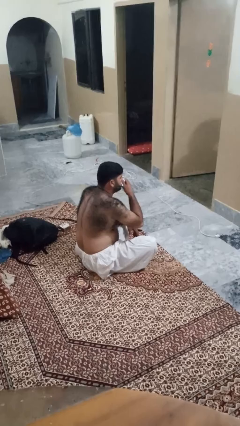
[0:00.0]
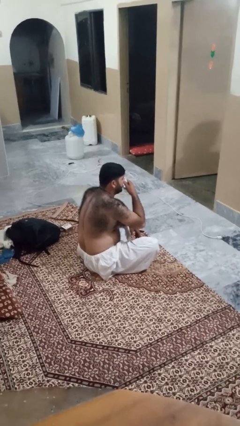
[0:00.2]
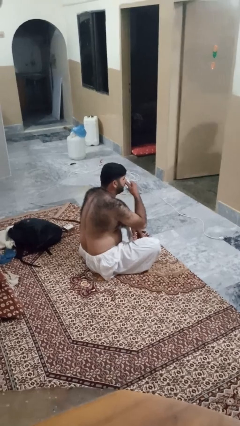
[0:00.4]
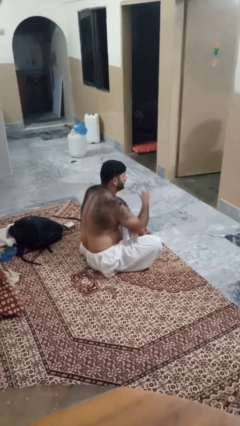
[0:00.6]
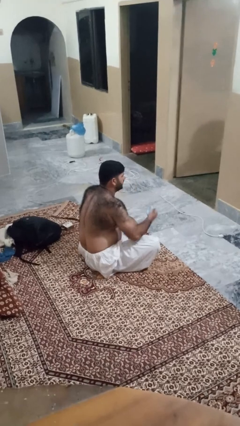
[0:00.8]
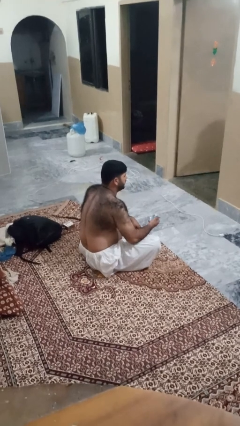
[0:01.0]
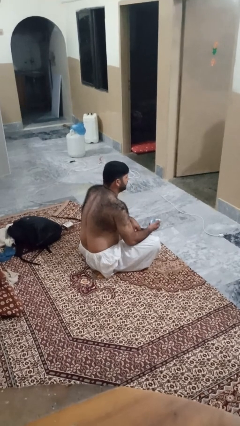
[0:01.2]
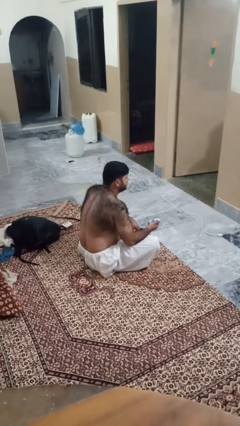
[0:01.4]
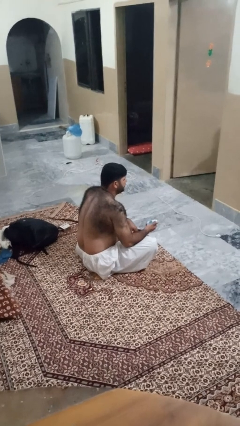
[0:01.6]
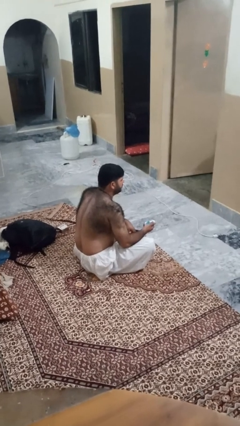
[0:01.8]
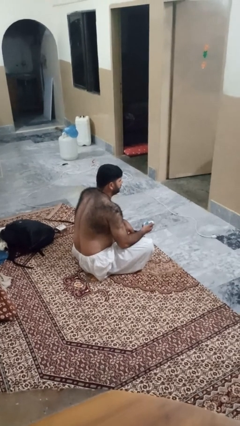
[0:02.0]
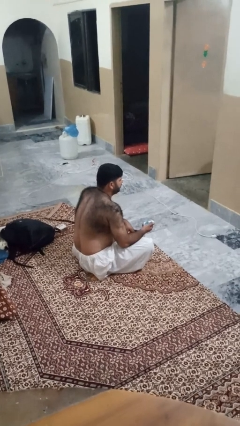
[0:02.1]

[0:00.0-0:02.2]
person blows nose

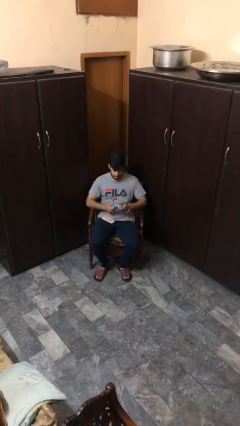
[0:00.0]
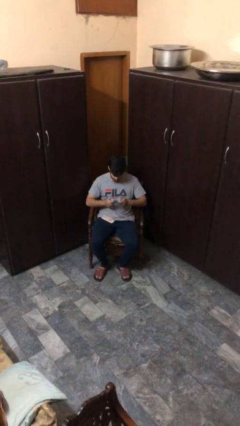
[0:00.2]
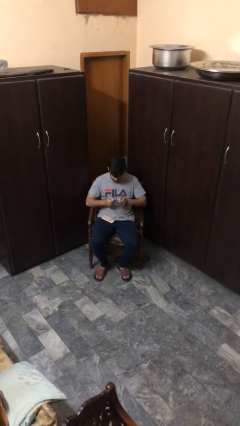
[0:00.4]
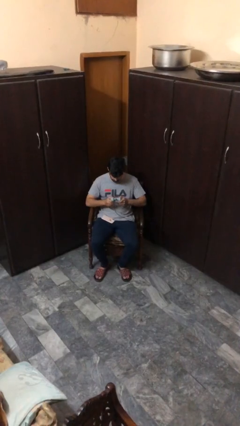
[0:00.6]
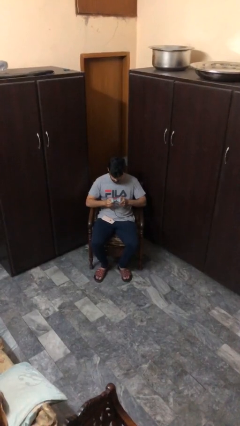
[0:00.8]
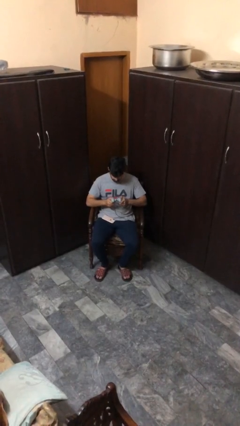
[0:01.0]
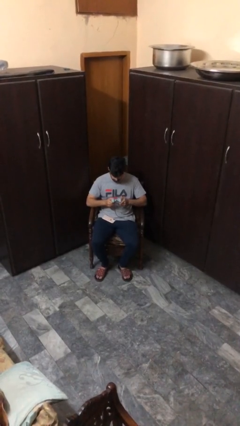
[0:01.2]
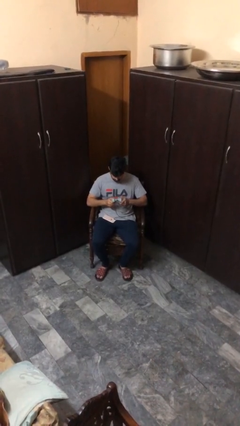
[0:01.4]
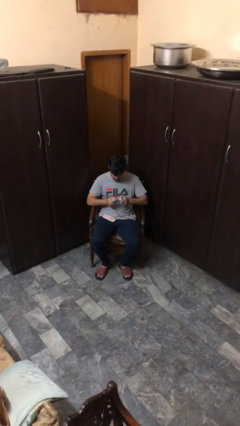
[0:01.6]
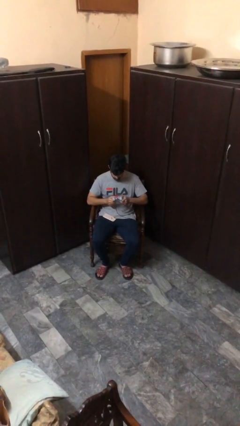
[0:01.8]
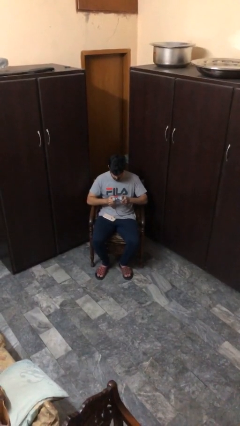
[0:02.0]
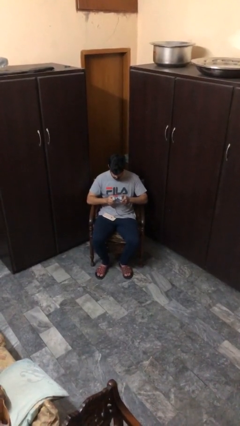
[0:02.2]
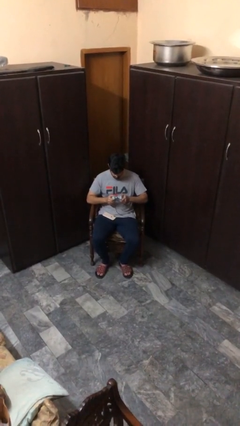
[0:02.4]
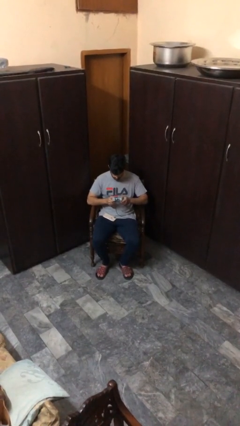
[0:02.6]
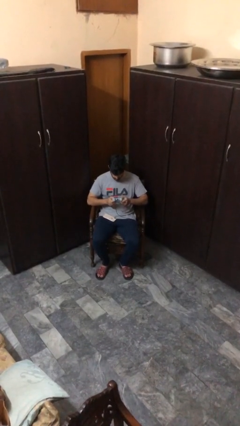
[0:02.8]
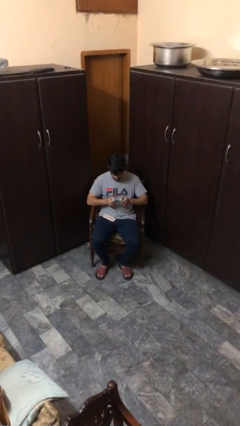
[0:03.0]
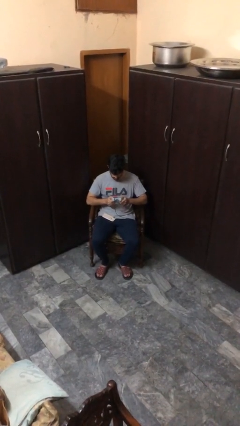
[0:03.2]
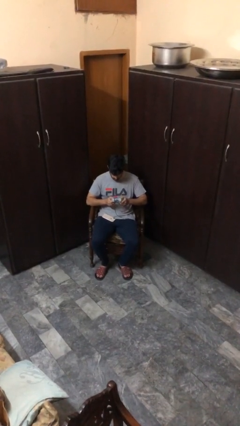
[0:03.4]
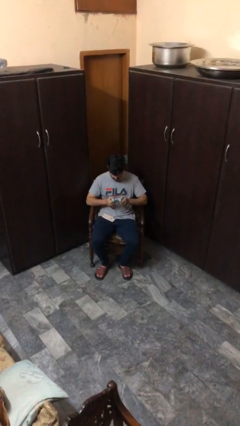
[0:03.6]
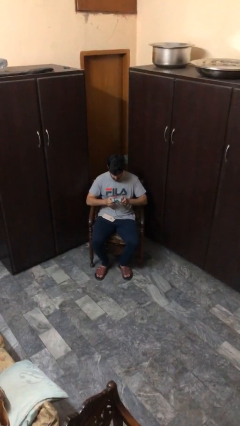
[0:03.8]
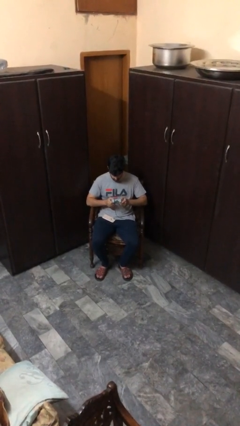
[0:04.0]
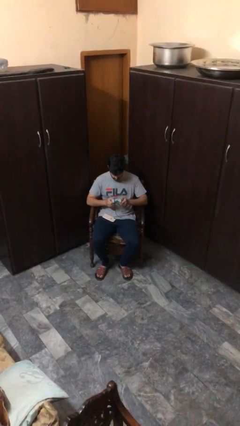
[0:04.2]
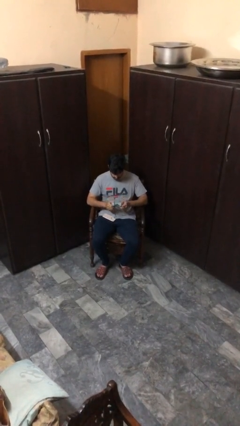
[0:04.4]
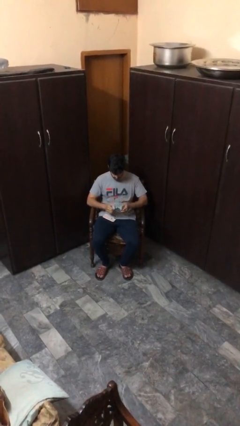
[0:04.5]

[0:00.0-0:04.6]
person interacts with handheld game

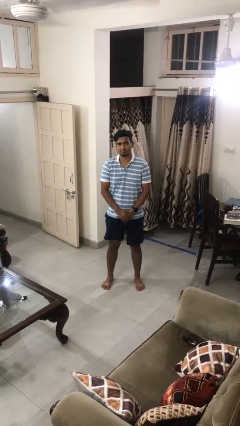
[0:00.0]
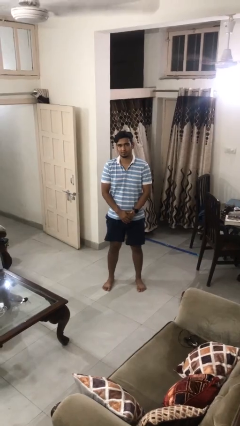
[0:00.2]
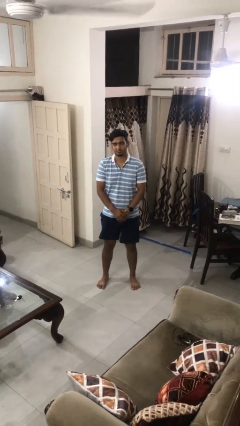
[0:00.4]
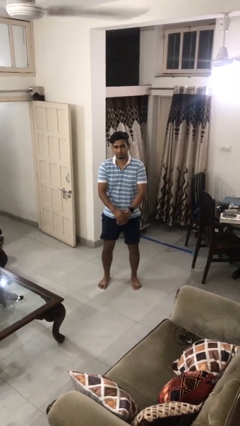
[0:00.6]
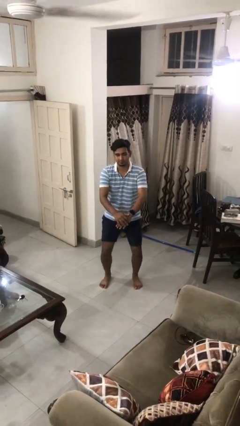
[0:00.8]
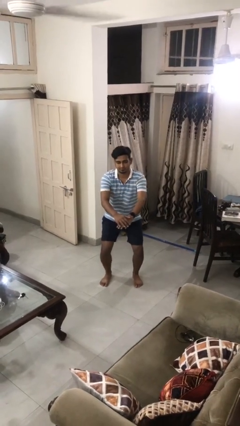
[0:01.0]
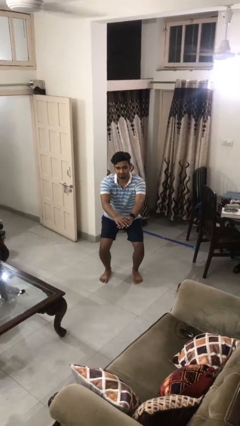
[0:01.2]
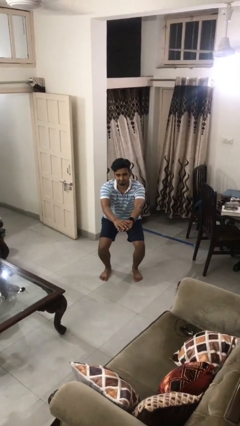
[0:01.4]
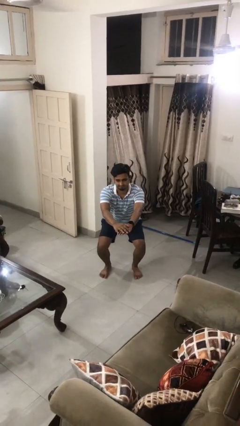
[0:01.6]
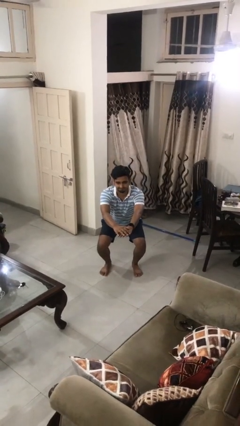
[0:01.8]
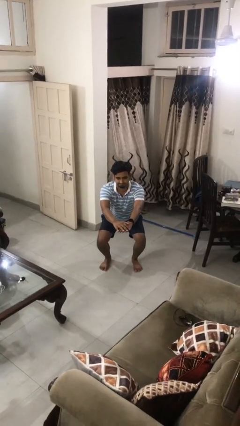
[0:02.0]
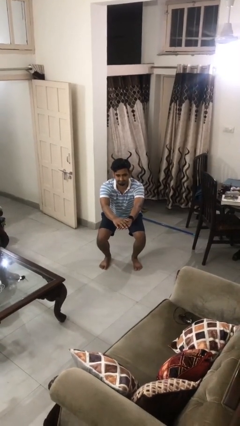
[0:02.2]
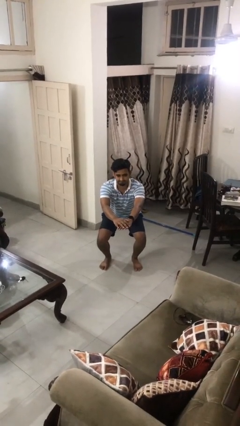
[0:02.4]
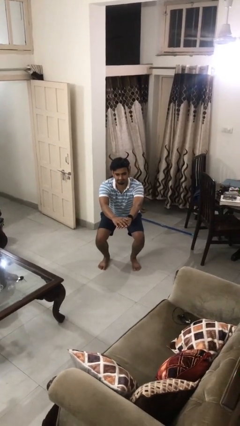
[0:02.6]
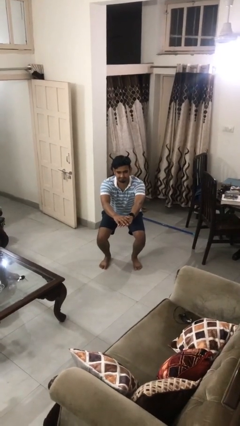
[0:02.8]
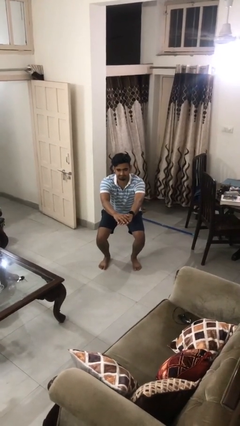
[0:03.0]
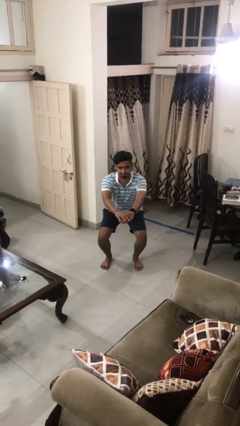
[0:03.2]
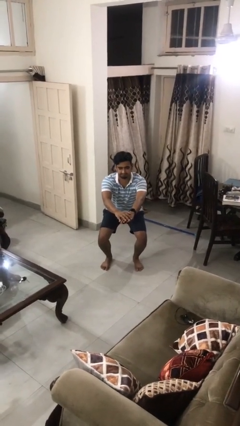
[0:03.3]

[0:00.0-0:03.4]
person squats

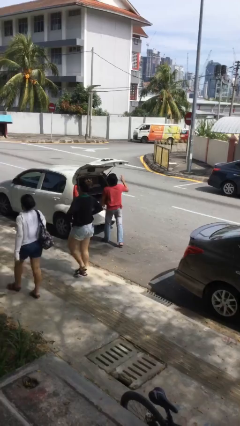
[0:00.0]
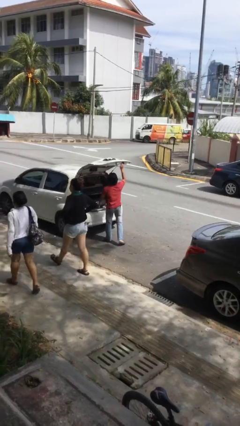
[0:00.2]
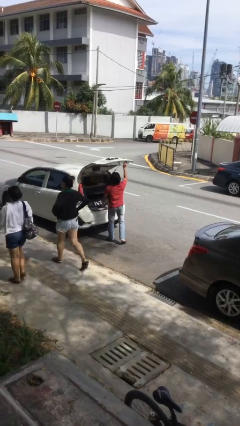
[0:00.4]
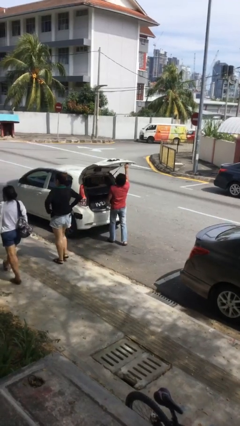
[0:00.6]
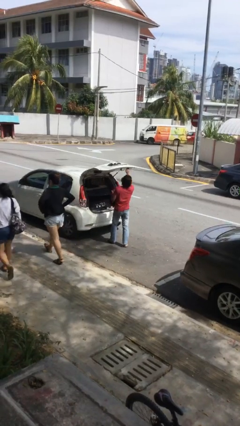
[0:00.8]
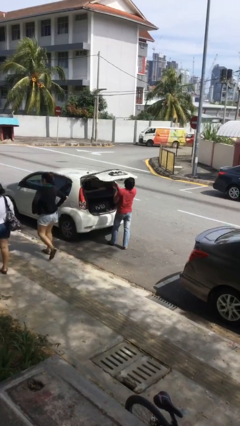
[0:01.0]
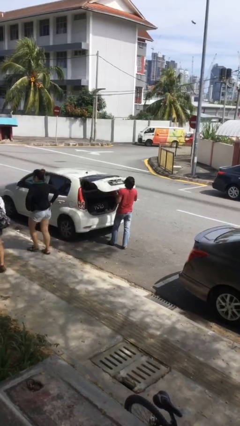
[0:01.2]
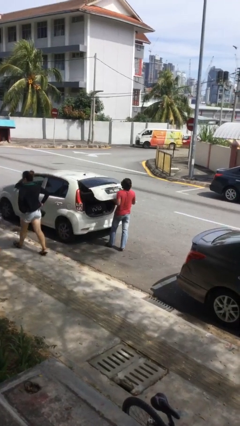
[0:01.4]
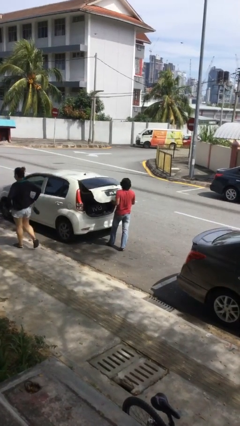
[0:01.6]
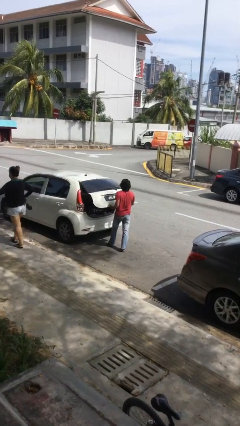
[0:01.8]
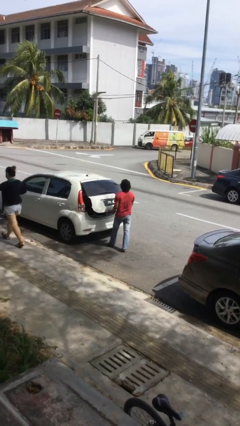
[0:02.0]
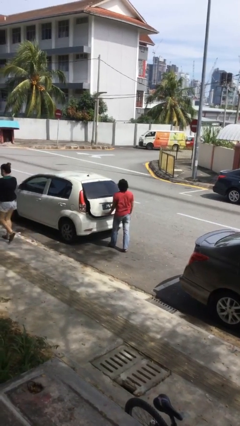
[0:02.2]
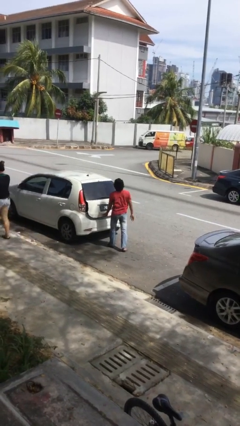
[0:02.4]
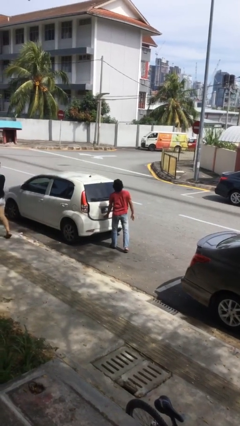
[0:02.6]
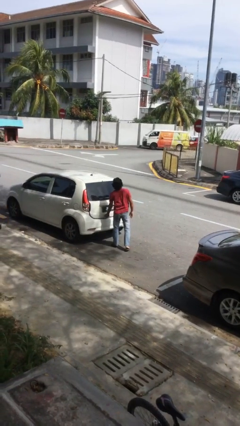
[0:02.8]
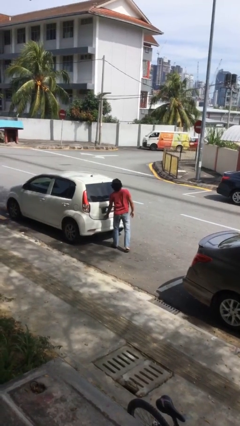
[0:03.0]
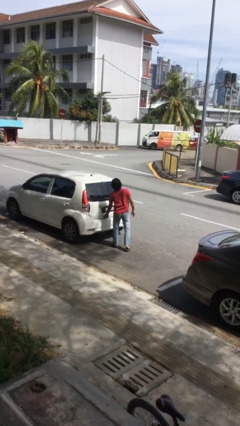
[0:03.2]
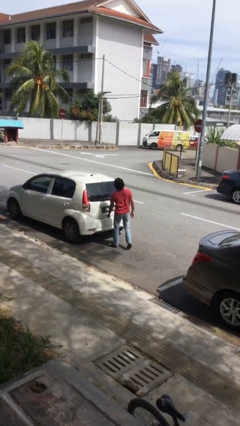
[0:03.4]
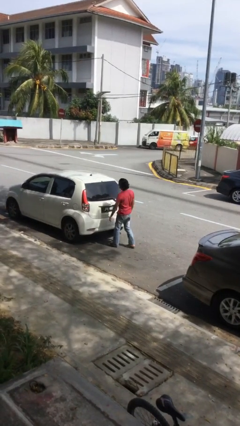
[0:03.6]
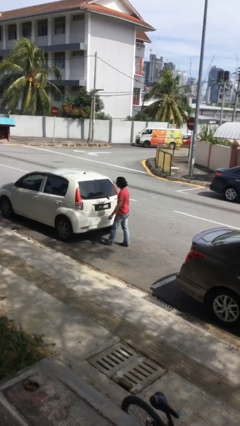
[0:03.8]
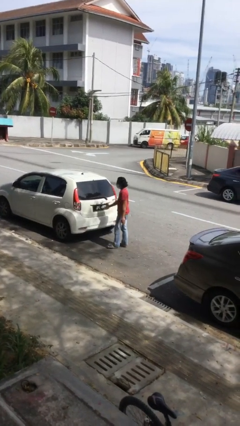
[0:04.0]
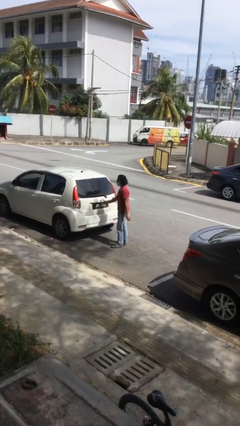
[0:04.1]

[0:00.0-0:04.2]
person closes car trunk

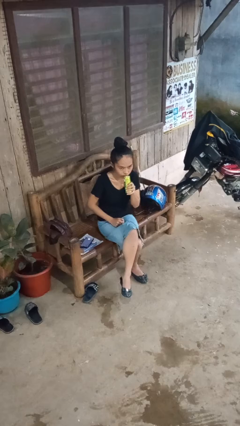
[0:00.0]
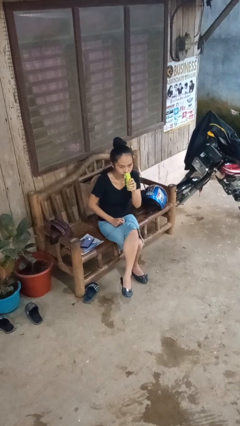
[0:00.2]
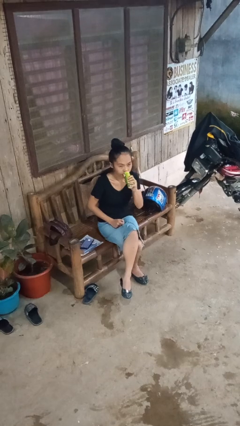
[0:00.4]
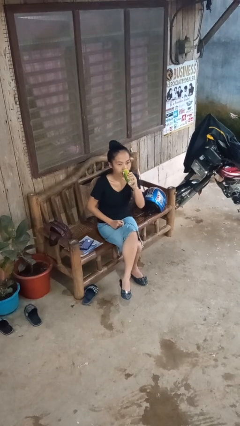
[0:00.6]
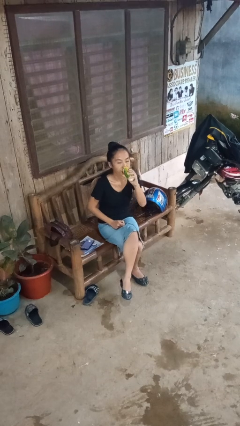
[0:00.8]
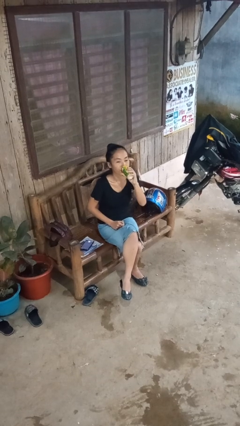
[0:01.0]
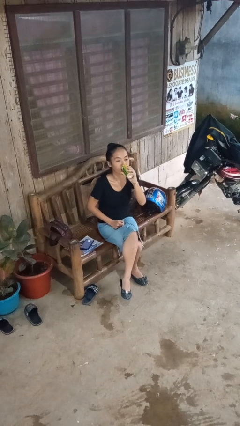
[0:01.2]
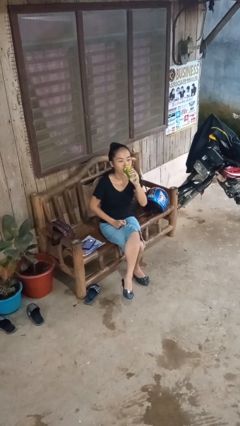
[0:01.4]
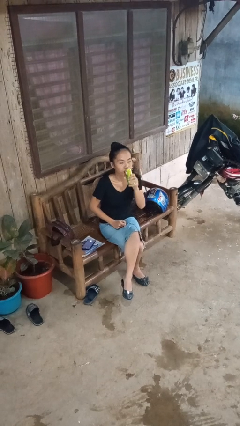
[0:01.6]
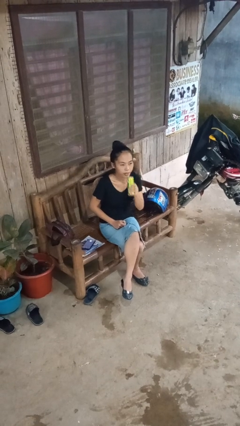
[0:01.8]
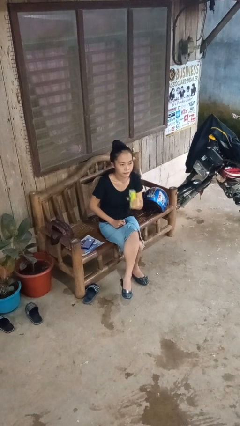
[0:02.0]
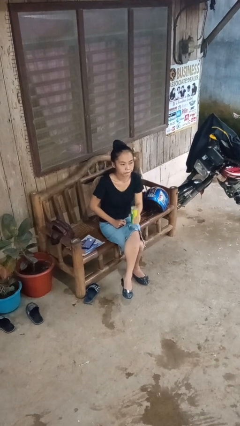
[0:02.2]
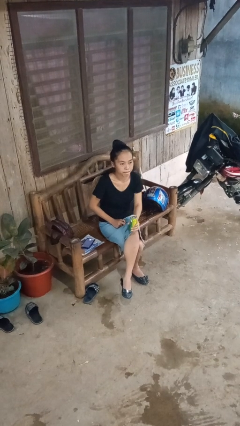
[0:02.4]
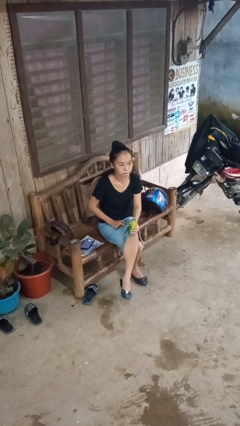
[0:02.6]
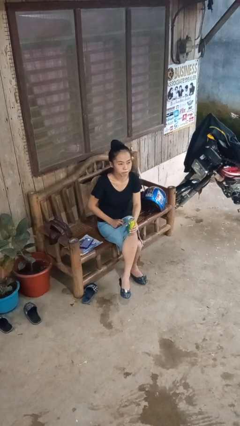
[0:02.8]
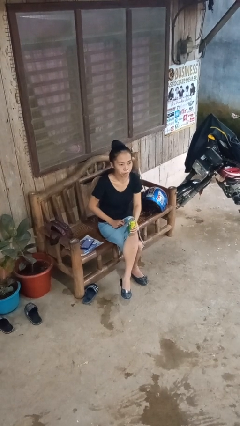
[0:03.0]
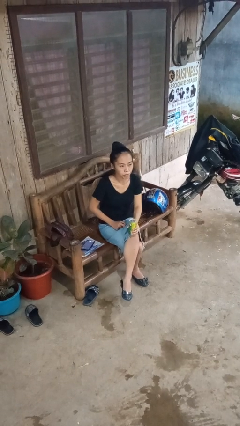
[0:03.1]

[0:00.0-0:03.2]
person drinks from beverage can

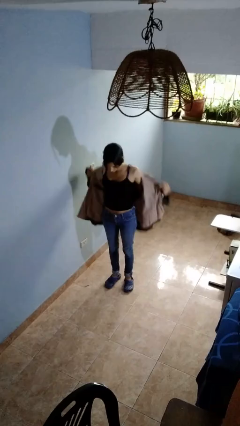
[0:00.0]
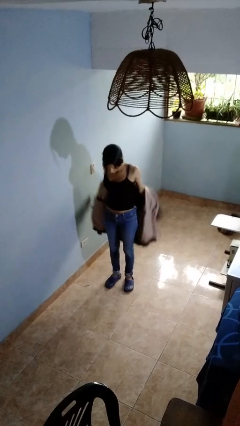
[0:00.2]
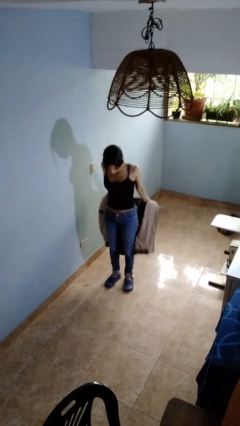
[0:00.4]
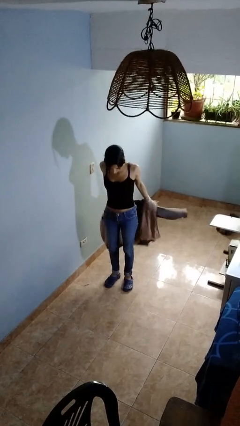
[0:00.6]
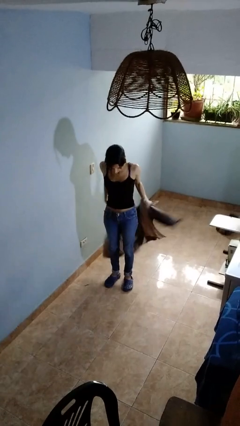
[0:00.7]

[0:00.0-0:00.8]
person takes off jacket
